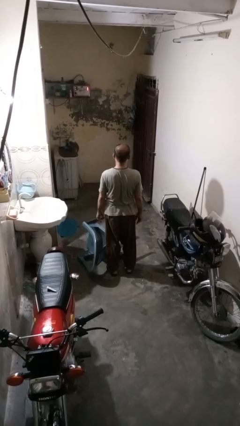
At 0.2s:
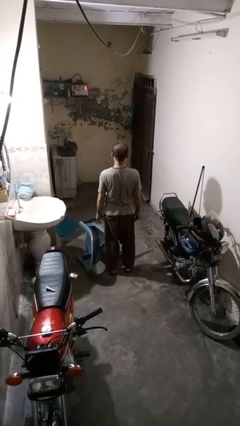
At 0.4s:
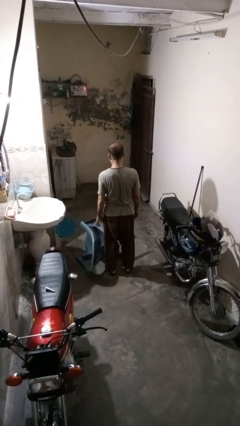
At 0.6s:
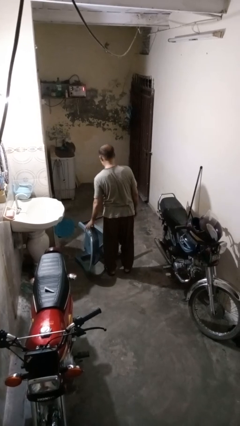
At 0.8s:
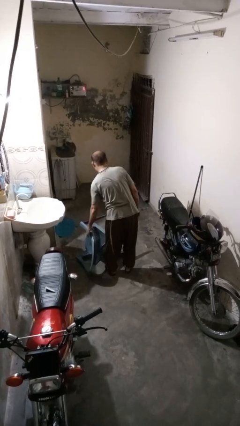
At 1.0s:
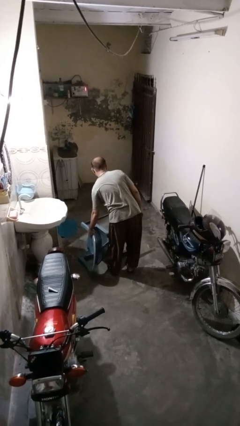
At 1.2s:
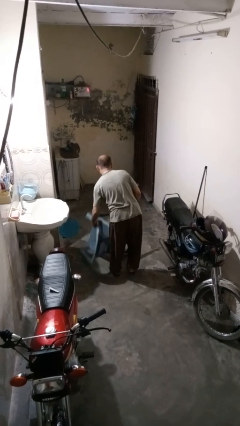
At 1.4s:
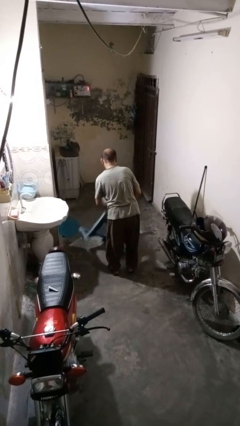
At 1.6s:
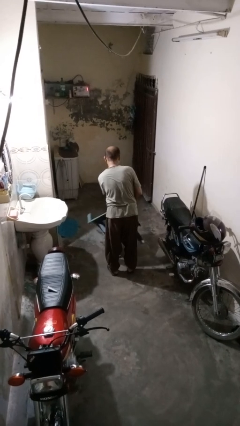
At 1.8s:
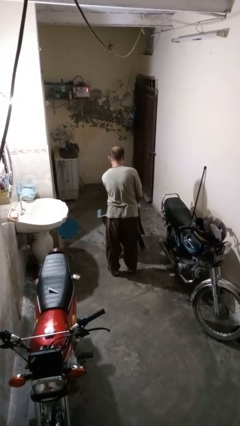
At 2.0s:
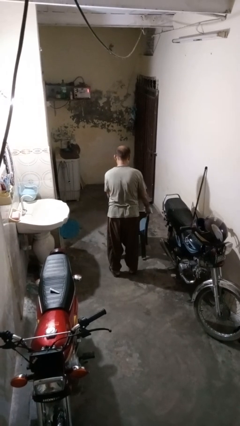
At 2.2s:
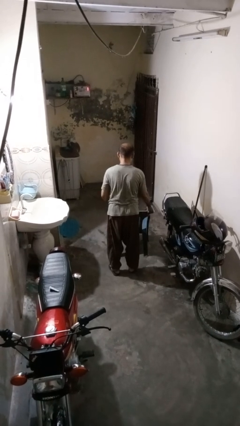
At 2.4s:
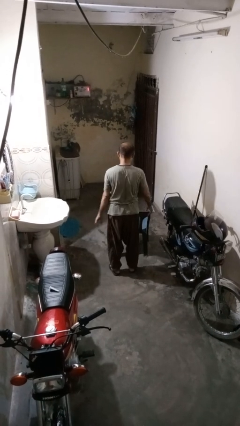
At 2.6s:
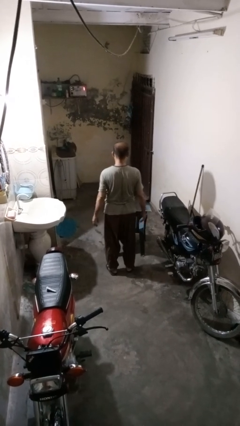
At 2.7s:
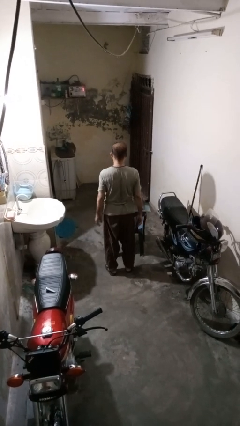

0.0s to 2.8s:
person sets upright furniture

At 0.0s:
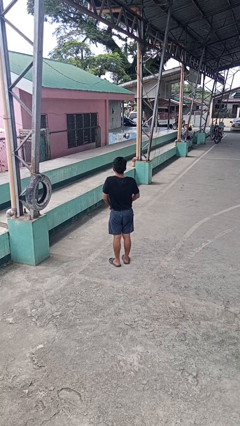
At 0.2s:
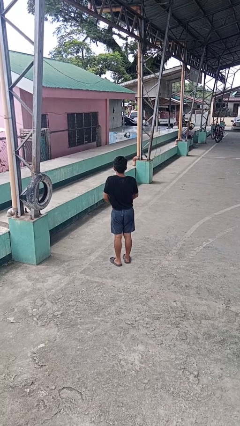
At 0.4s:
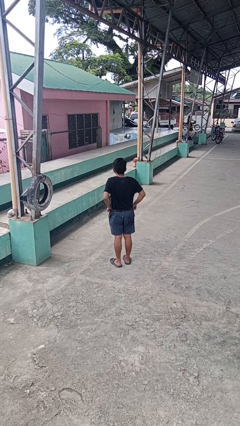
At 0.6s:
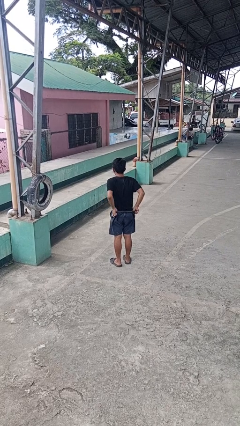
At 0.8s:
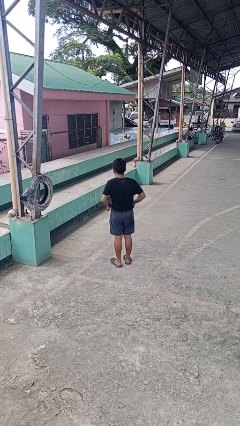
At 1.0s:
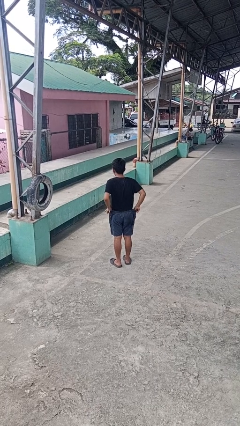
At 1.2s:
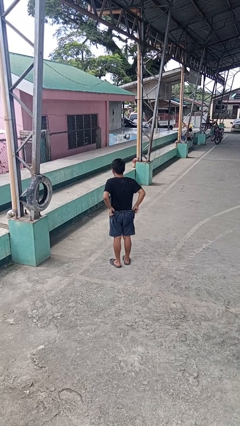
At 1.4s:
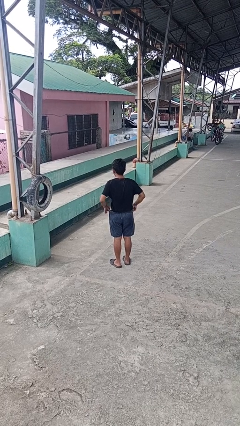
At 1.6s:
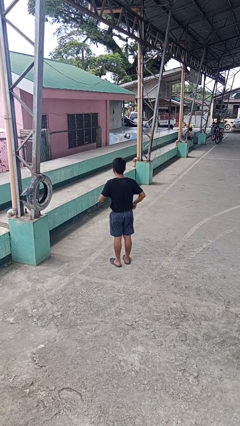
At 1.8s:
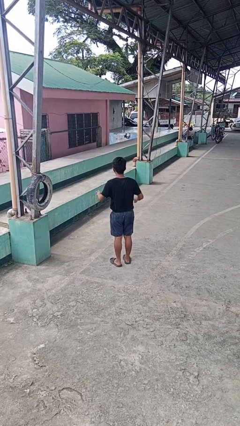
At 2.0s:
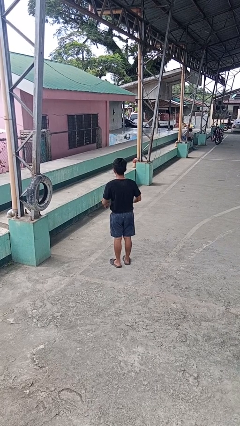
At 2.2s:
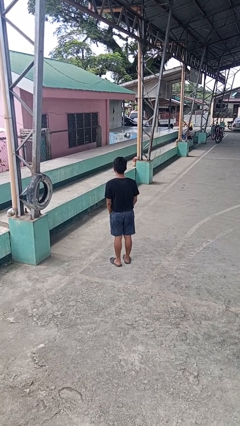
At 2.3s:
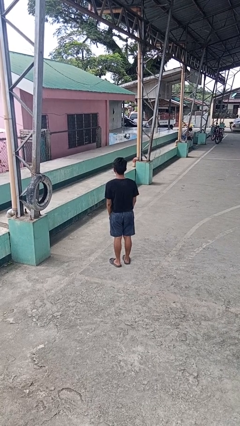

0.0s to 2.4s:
person hikes up pants

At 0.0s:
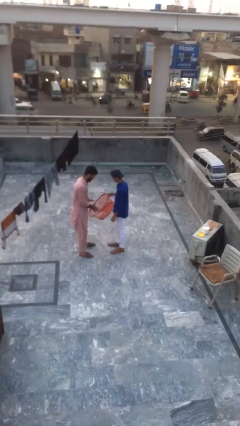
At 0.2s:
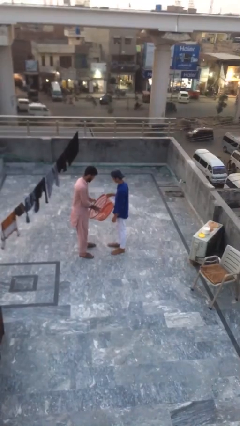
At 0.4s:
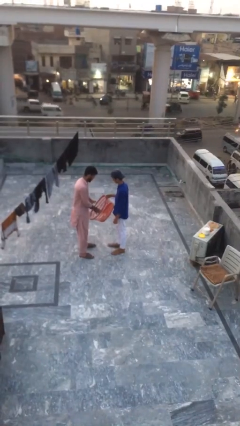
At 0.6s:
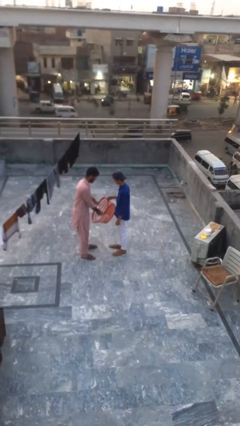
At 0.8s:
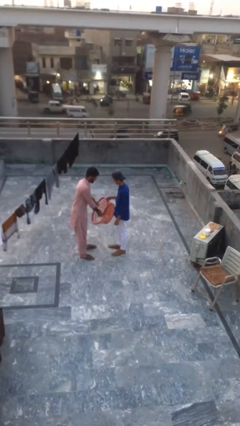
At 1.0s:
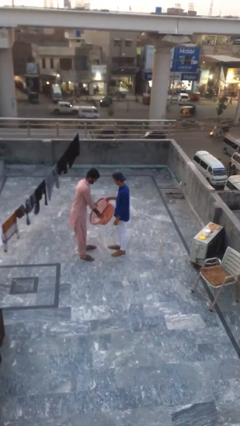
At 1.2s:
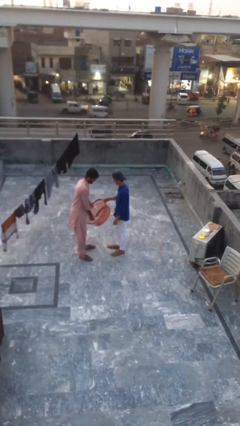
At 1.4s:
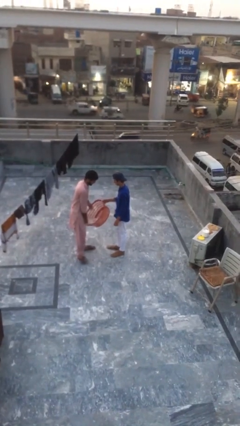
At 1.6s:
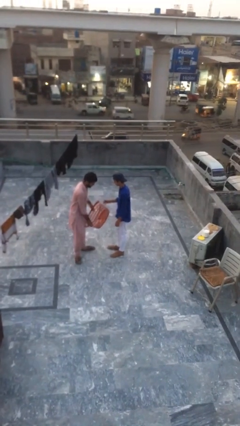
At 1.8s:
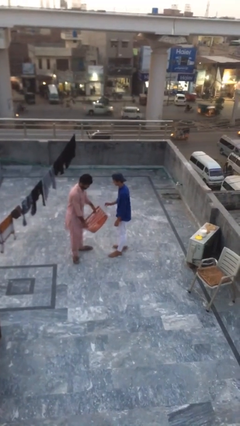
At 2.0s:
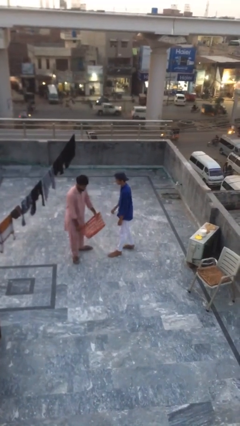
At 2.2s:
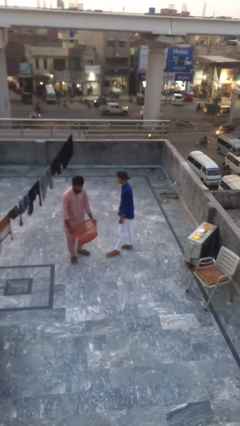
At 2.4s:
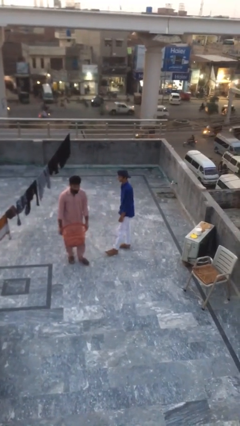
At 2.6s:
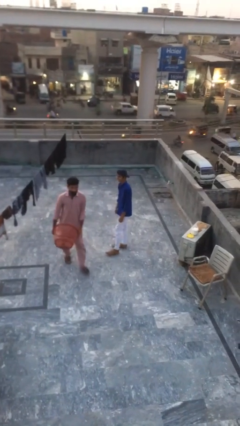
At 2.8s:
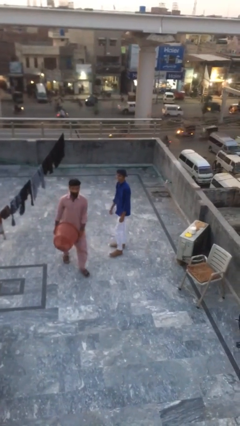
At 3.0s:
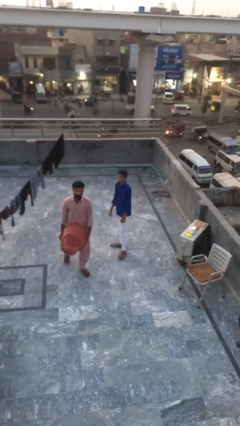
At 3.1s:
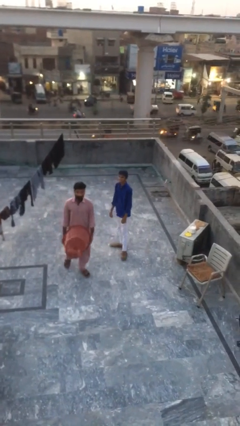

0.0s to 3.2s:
person transfers object to person

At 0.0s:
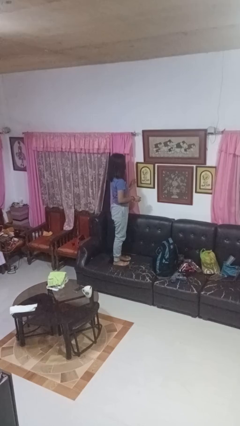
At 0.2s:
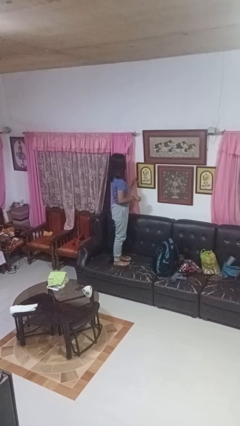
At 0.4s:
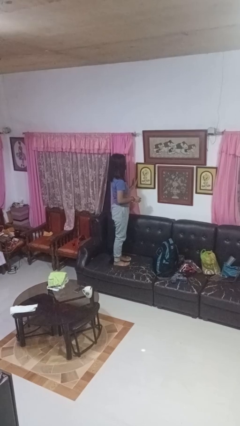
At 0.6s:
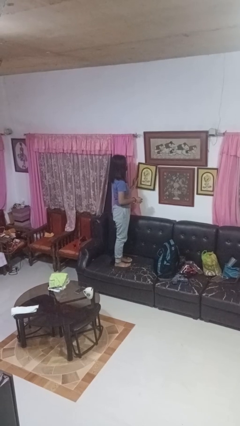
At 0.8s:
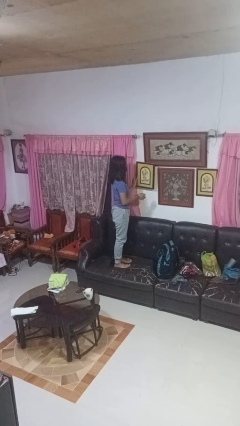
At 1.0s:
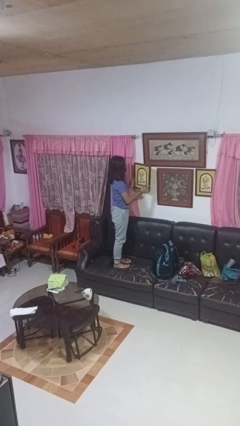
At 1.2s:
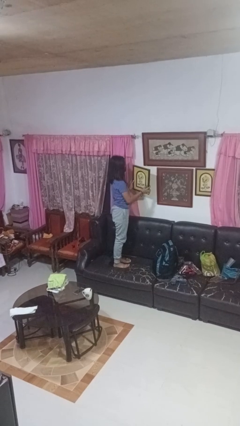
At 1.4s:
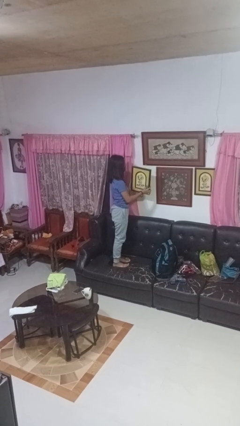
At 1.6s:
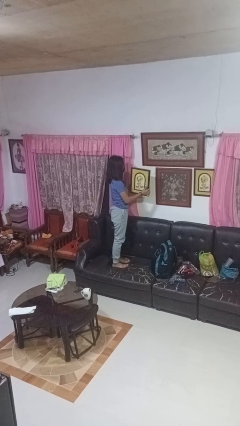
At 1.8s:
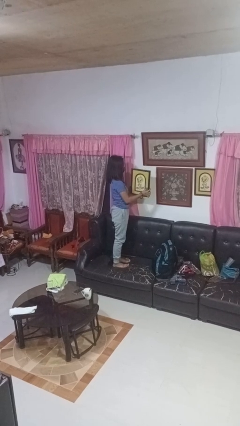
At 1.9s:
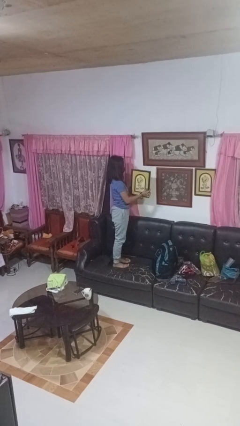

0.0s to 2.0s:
person takes down picture frame

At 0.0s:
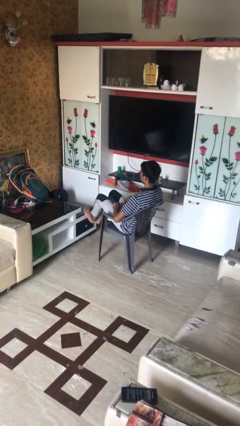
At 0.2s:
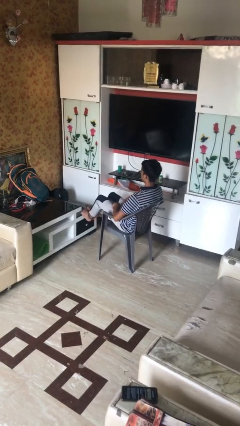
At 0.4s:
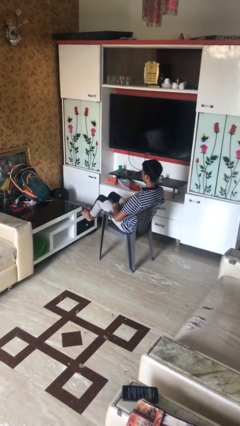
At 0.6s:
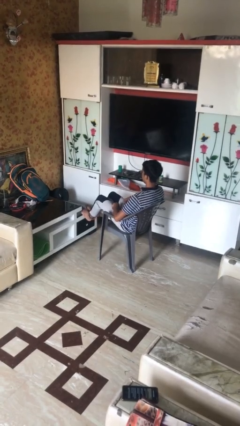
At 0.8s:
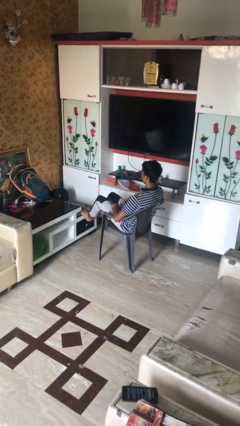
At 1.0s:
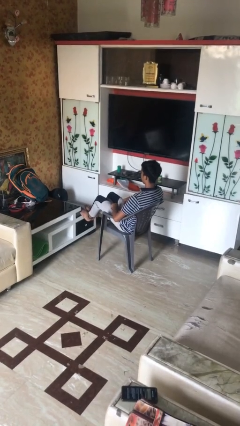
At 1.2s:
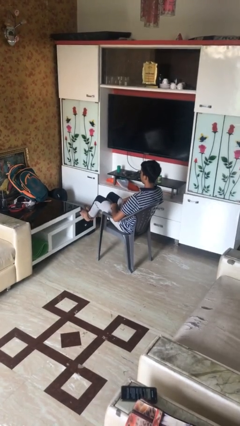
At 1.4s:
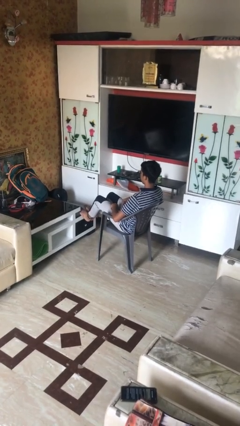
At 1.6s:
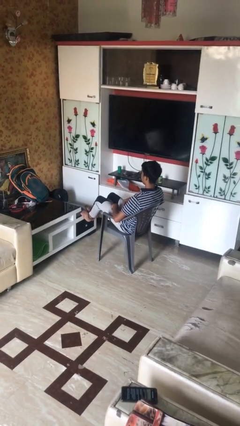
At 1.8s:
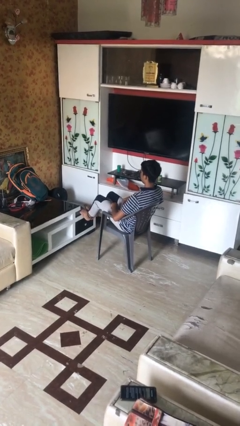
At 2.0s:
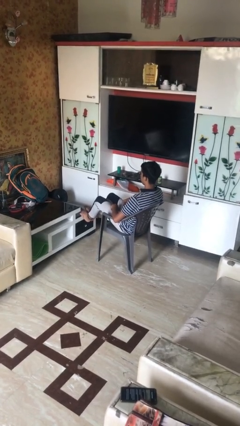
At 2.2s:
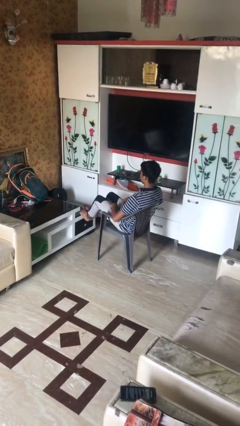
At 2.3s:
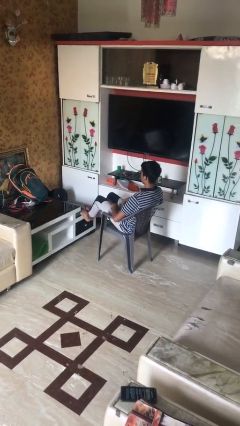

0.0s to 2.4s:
person puts feet up

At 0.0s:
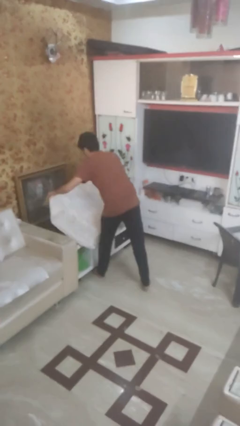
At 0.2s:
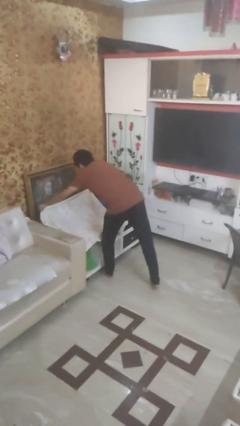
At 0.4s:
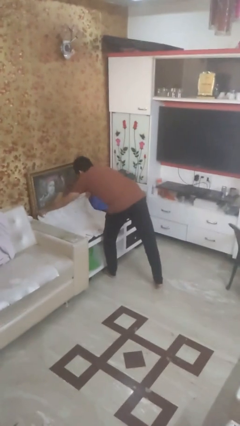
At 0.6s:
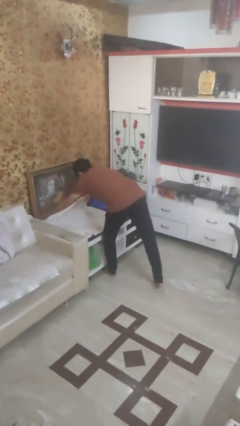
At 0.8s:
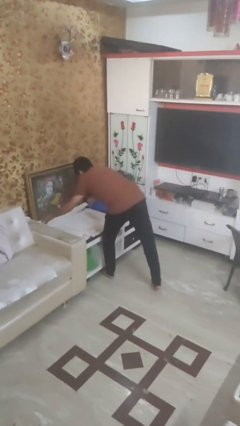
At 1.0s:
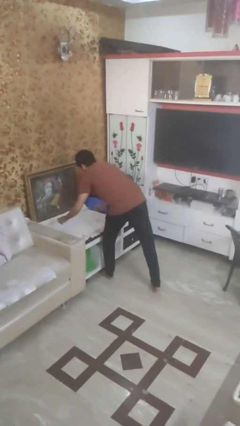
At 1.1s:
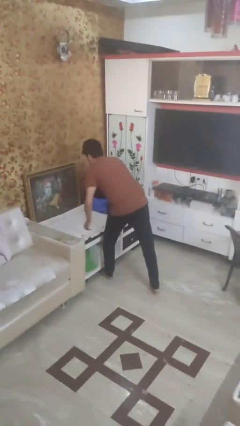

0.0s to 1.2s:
person spreads tablecloth

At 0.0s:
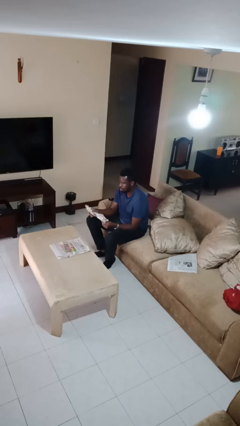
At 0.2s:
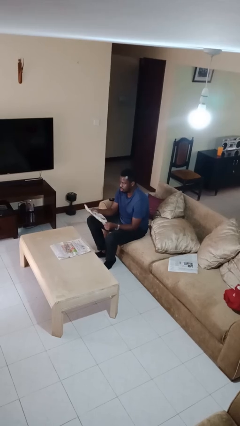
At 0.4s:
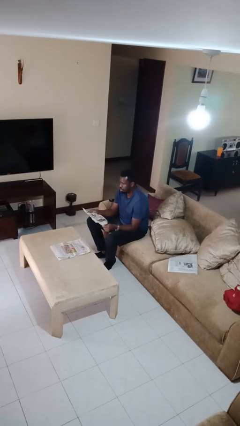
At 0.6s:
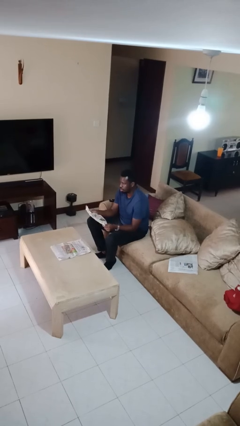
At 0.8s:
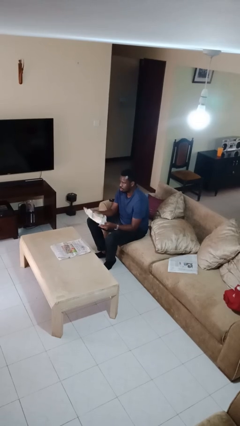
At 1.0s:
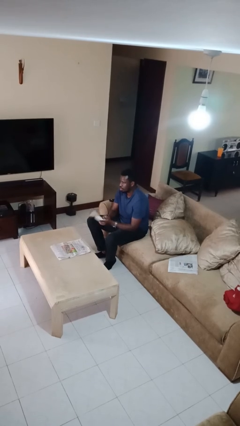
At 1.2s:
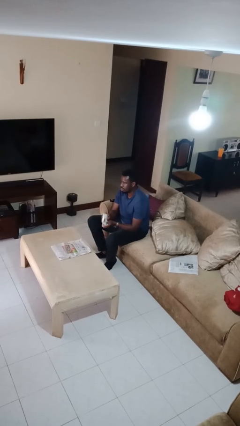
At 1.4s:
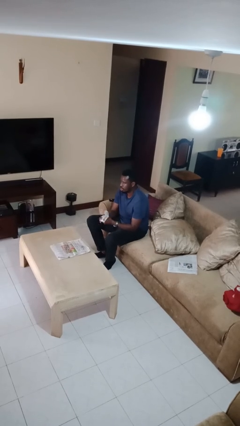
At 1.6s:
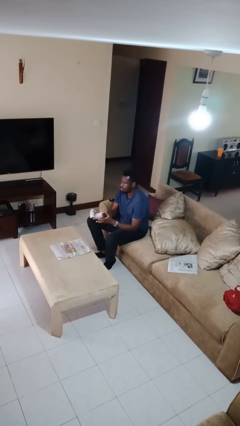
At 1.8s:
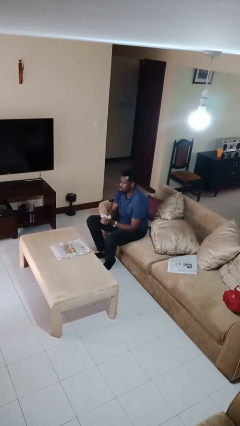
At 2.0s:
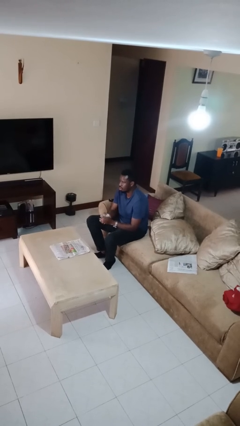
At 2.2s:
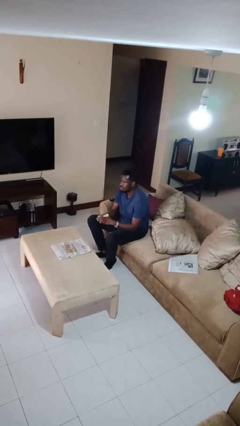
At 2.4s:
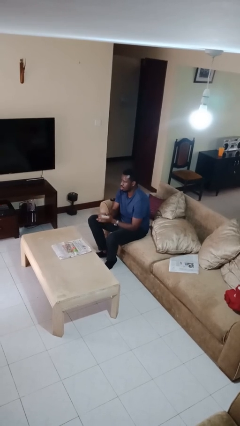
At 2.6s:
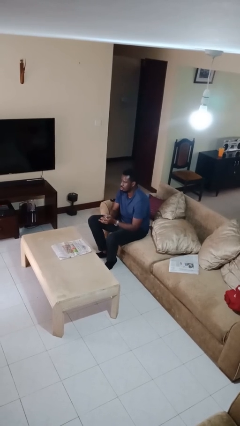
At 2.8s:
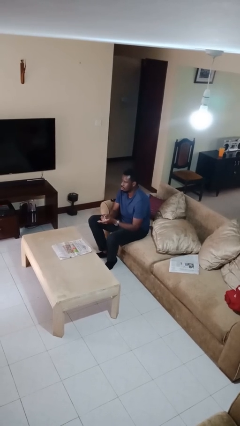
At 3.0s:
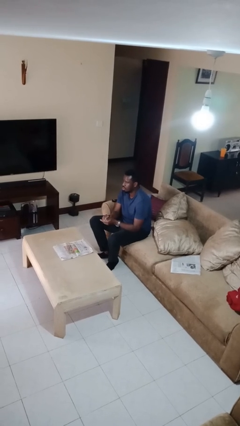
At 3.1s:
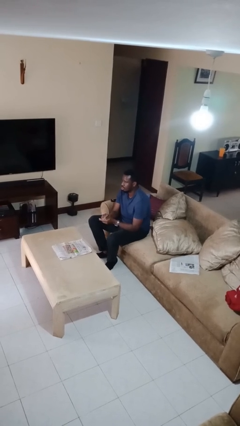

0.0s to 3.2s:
person crumples paper
